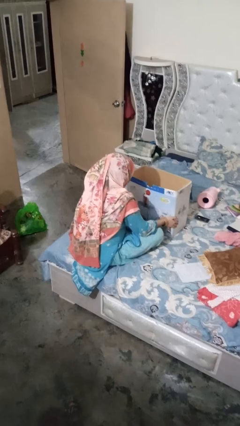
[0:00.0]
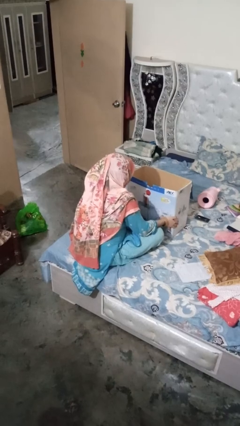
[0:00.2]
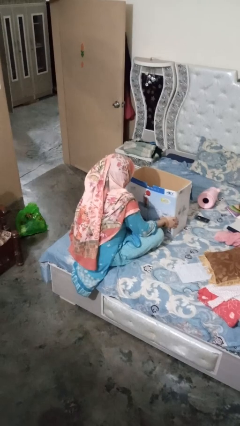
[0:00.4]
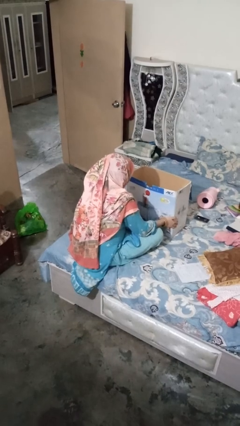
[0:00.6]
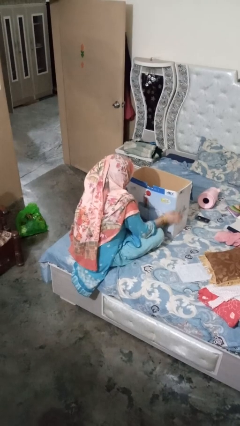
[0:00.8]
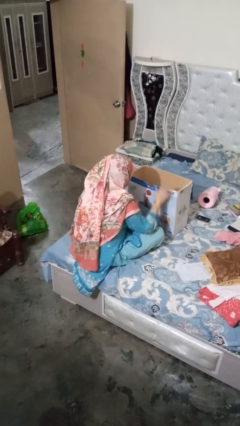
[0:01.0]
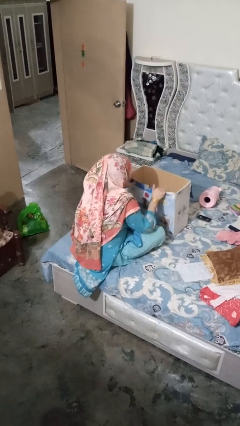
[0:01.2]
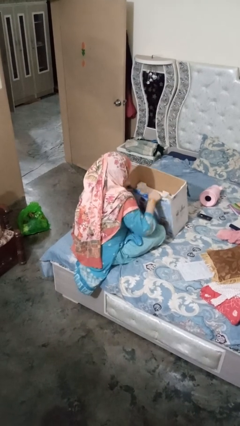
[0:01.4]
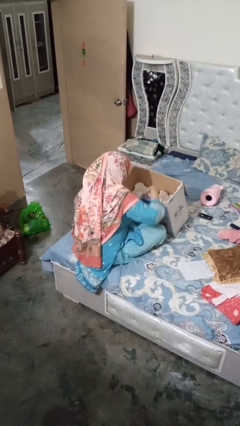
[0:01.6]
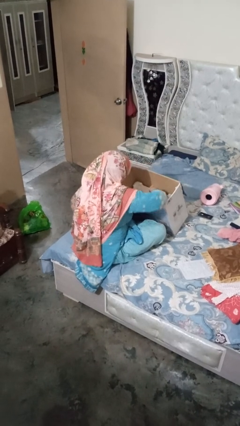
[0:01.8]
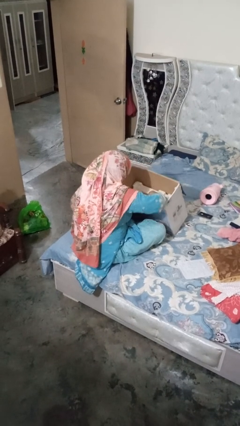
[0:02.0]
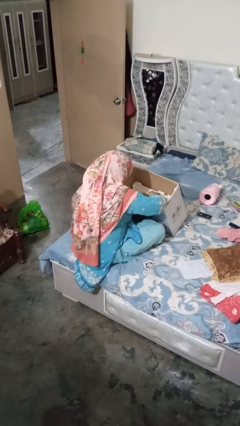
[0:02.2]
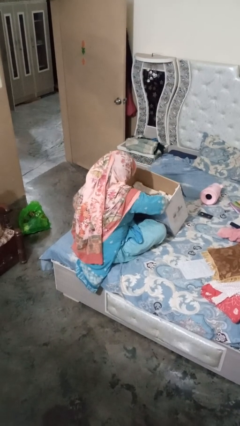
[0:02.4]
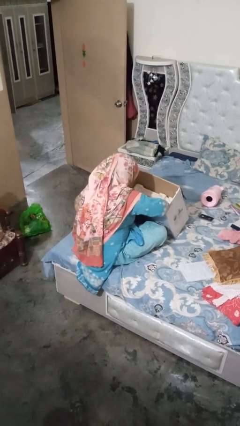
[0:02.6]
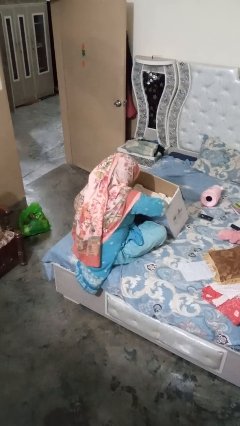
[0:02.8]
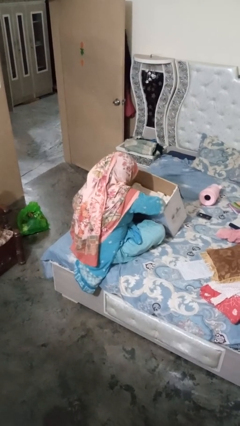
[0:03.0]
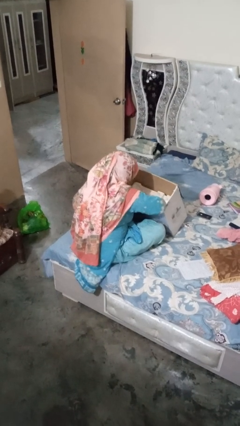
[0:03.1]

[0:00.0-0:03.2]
person searches in box

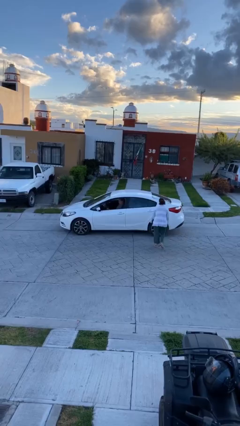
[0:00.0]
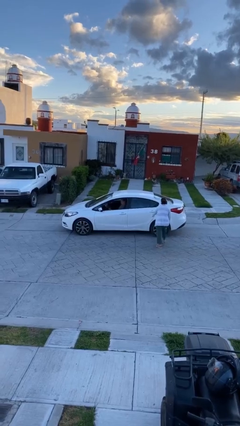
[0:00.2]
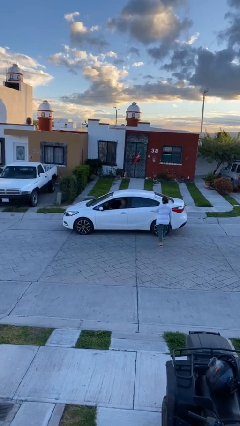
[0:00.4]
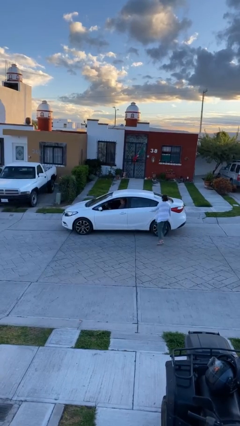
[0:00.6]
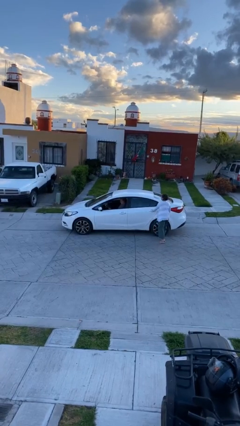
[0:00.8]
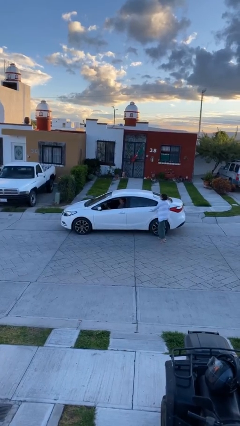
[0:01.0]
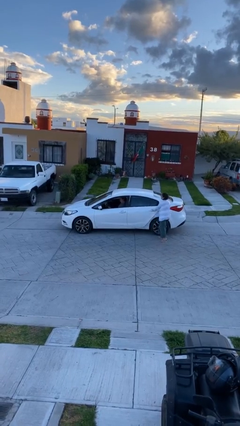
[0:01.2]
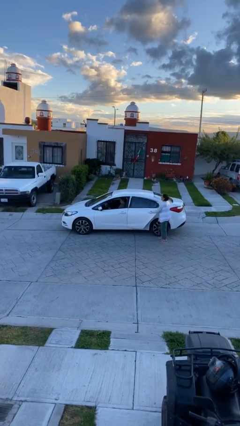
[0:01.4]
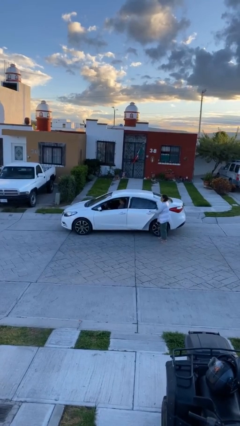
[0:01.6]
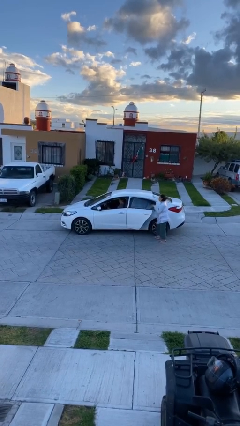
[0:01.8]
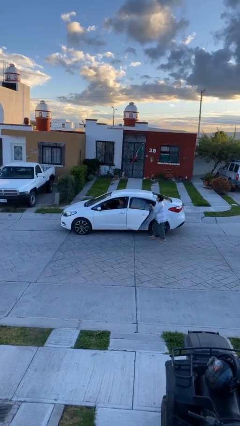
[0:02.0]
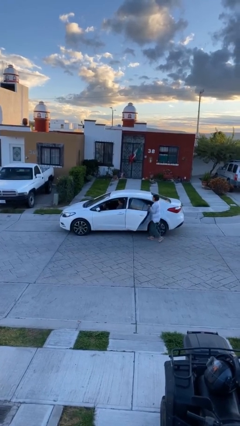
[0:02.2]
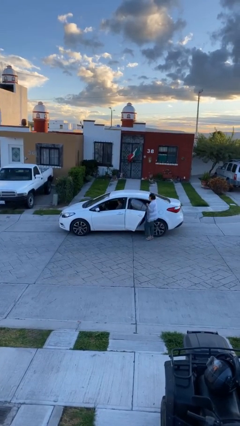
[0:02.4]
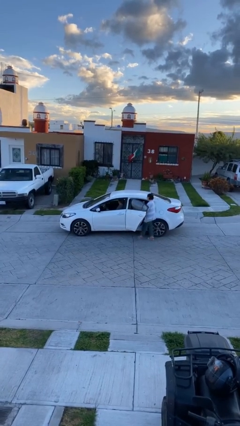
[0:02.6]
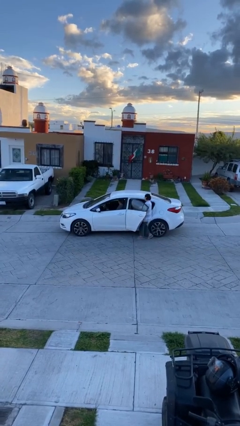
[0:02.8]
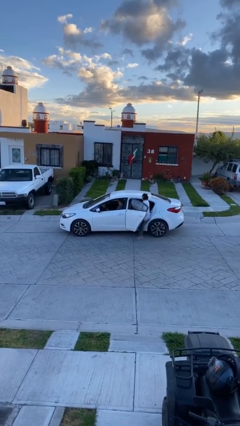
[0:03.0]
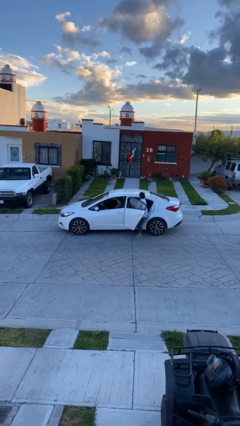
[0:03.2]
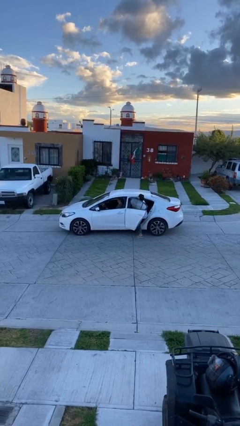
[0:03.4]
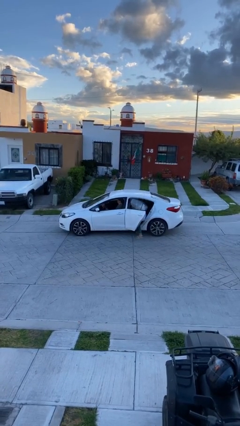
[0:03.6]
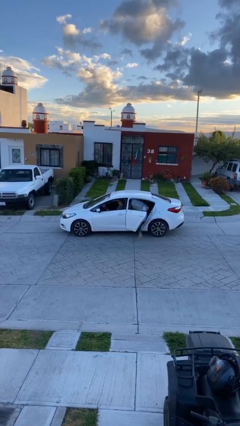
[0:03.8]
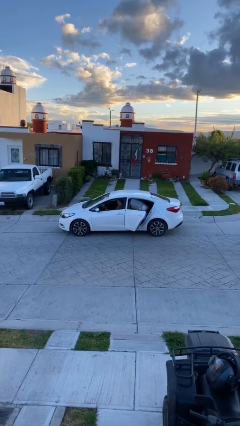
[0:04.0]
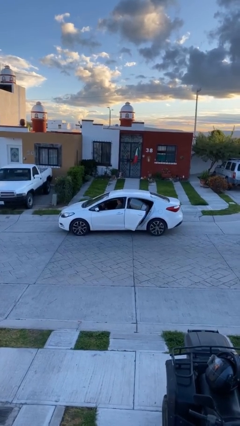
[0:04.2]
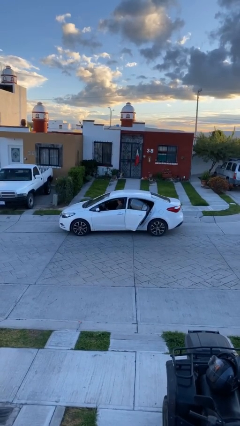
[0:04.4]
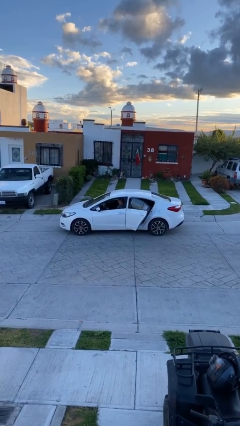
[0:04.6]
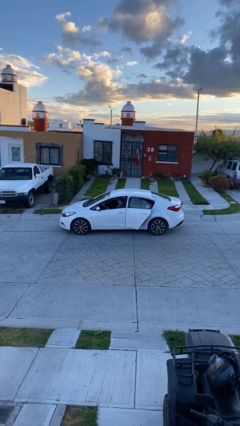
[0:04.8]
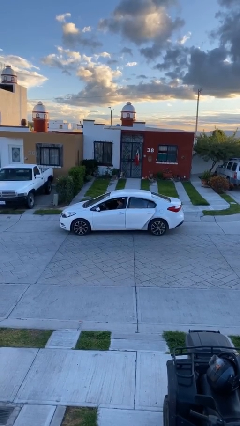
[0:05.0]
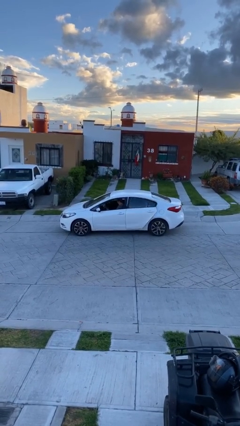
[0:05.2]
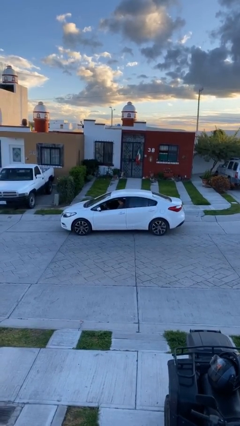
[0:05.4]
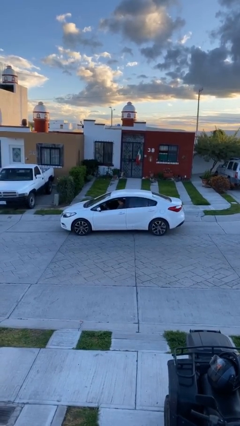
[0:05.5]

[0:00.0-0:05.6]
car picks up person

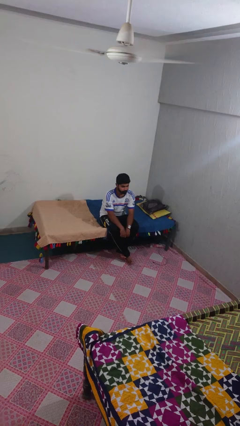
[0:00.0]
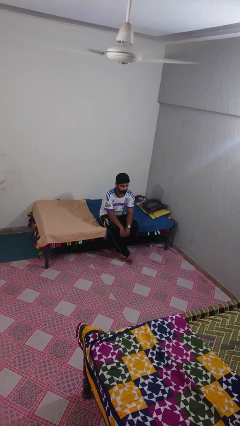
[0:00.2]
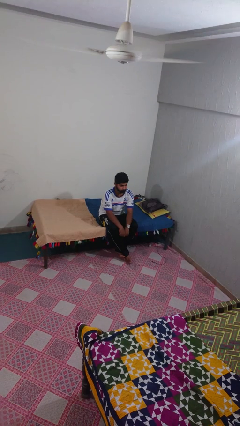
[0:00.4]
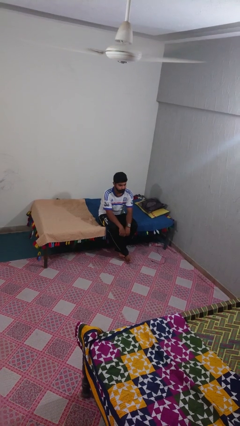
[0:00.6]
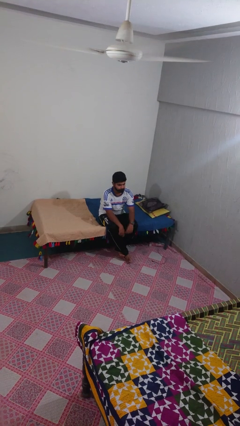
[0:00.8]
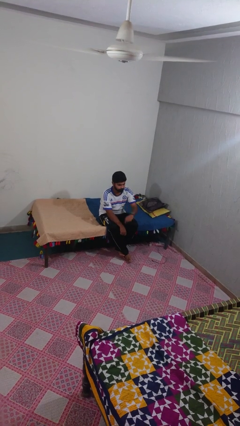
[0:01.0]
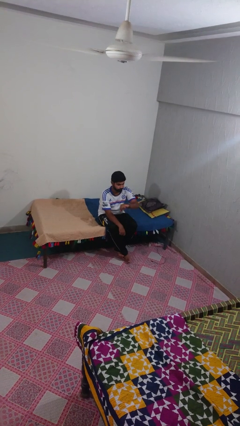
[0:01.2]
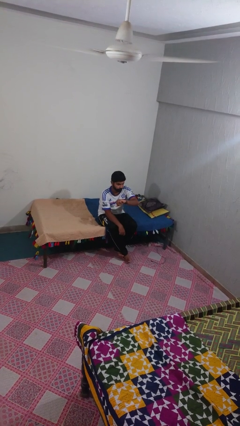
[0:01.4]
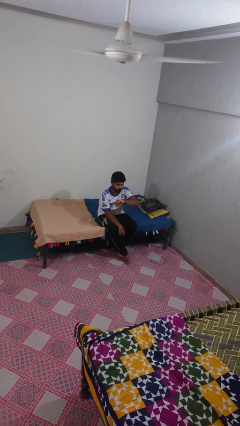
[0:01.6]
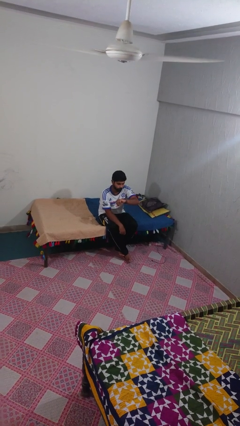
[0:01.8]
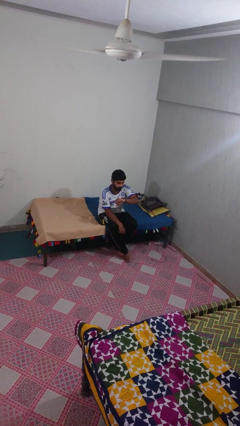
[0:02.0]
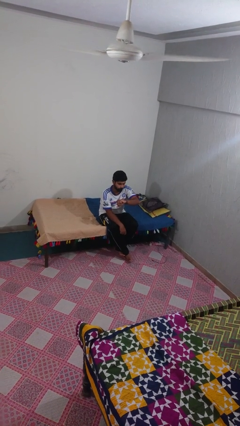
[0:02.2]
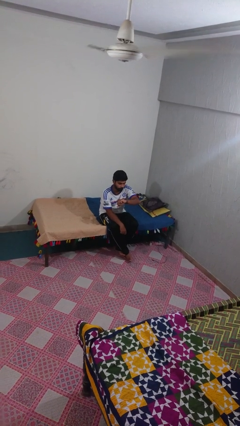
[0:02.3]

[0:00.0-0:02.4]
person looks at wristwatch

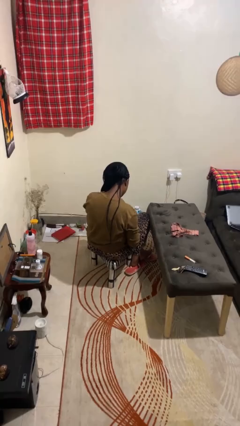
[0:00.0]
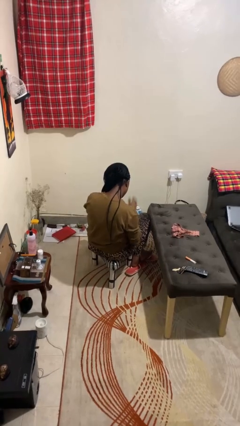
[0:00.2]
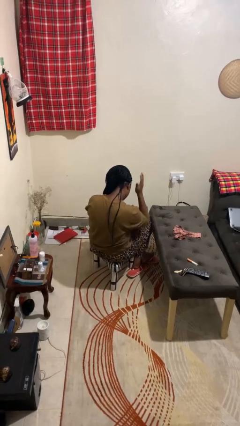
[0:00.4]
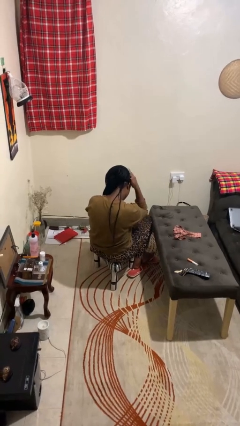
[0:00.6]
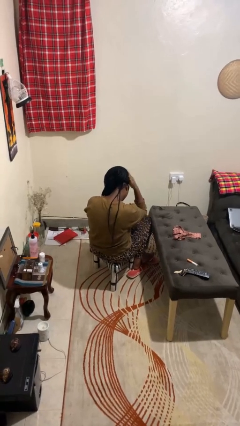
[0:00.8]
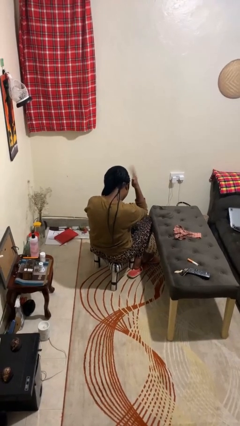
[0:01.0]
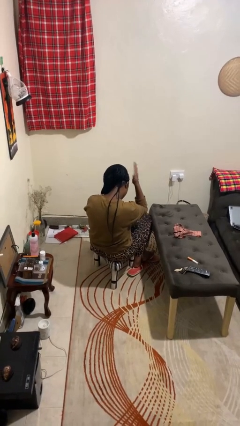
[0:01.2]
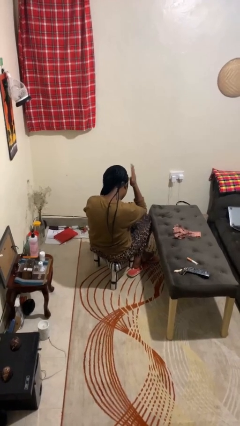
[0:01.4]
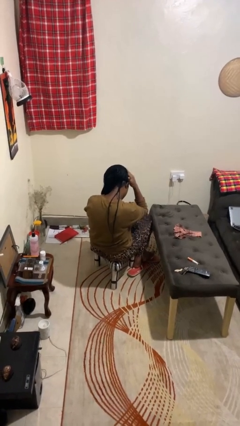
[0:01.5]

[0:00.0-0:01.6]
person pats head

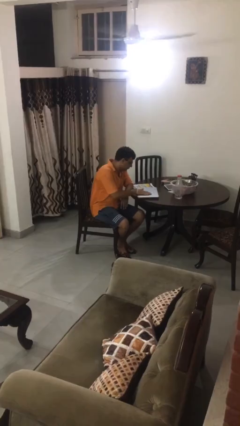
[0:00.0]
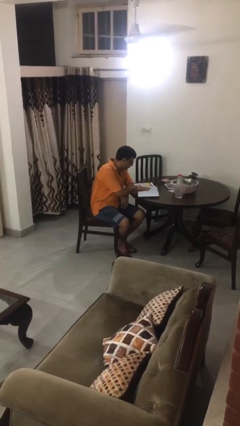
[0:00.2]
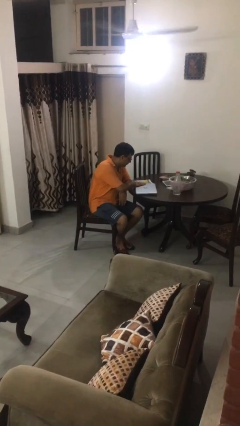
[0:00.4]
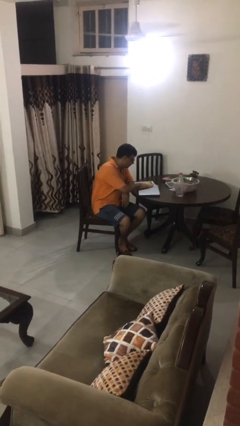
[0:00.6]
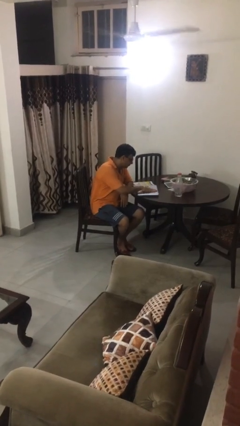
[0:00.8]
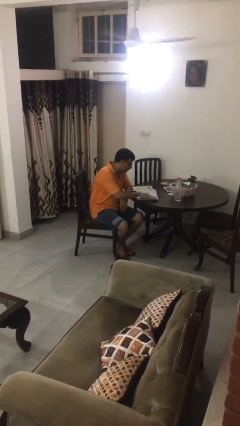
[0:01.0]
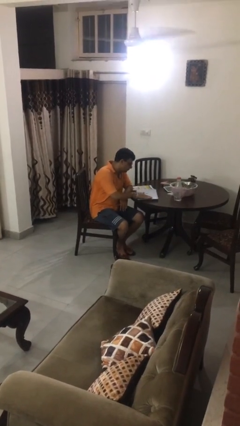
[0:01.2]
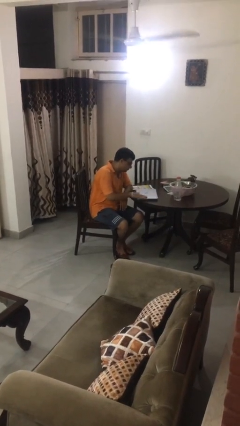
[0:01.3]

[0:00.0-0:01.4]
person waves hand over object

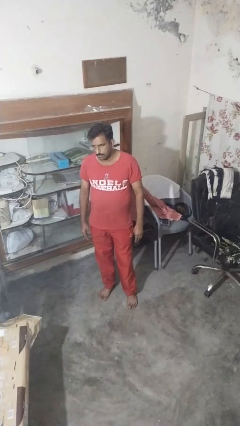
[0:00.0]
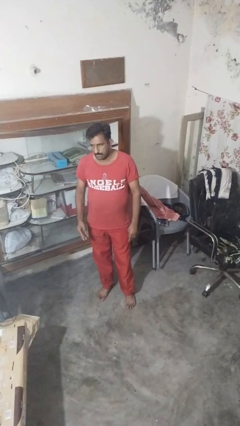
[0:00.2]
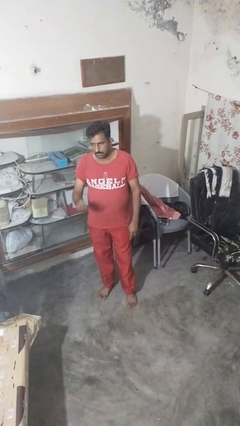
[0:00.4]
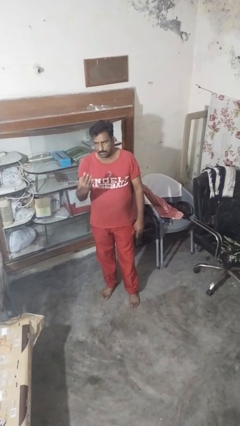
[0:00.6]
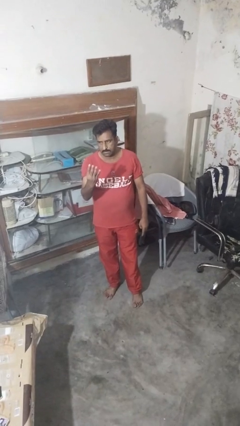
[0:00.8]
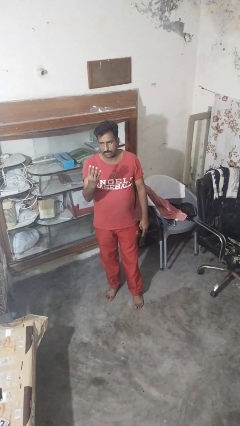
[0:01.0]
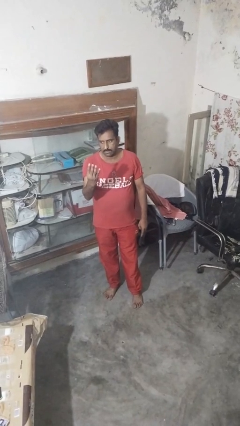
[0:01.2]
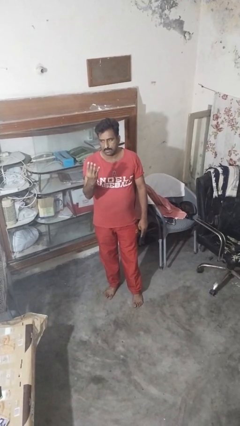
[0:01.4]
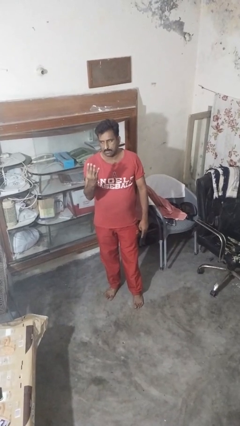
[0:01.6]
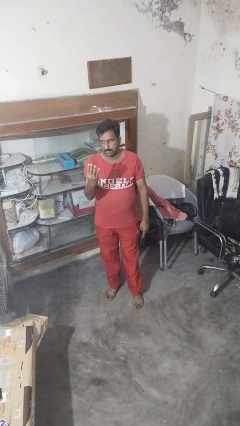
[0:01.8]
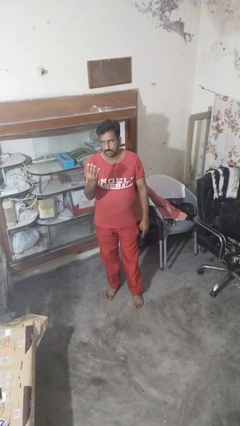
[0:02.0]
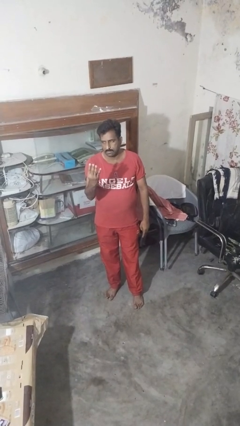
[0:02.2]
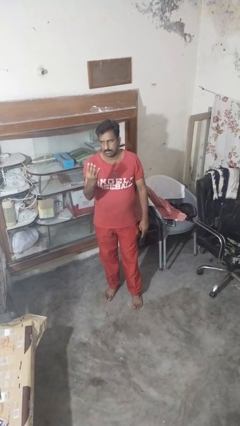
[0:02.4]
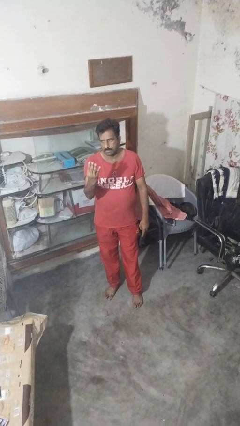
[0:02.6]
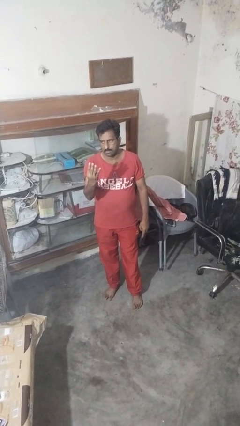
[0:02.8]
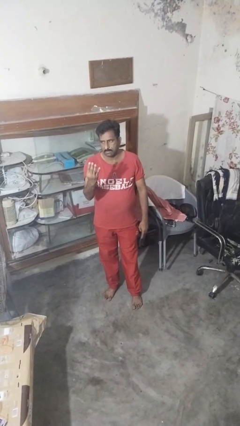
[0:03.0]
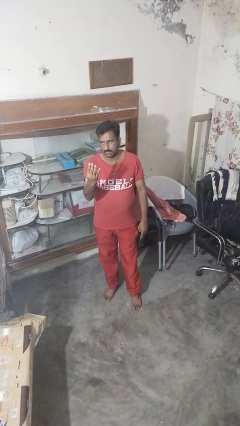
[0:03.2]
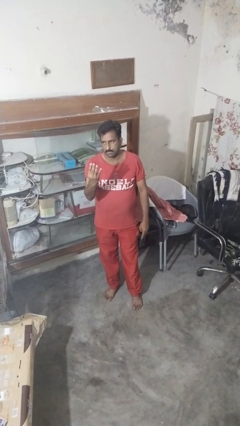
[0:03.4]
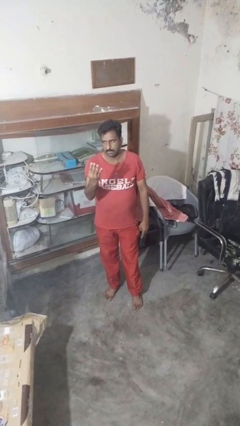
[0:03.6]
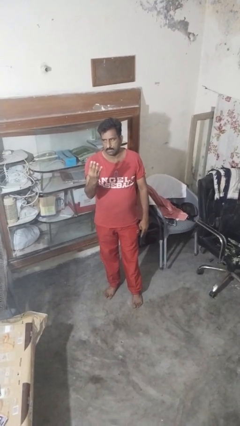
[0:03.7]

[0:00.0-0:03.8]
person gestures number four
